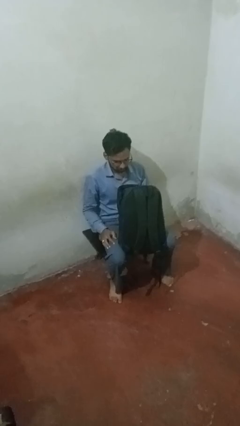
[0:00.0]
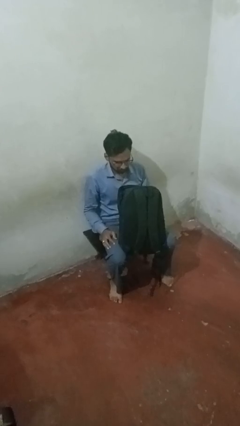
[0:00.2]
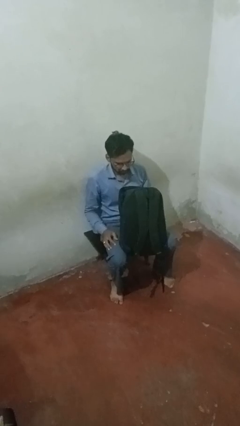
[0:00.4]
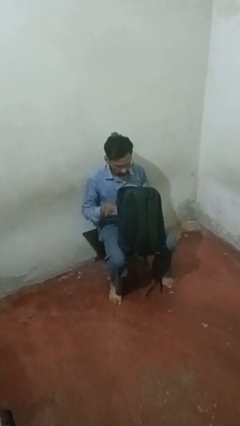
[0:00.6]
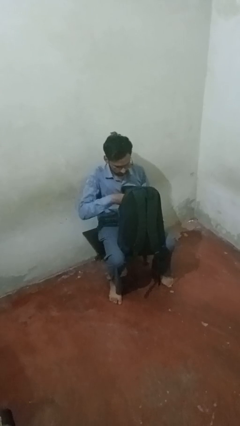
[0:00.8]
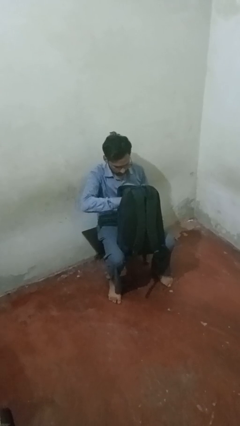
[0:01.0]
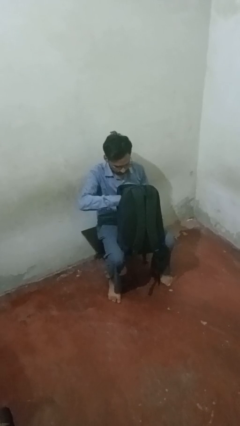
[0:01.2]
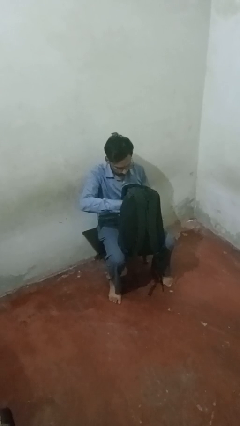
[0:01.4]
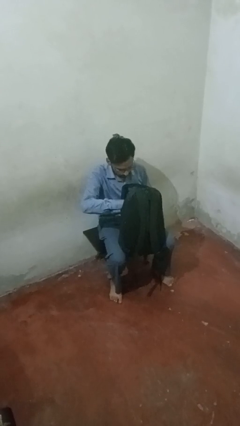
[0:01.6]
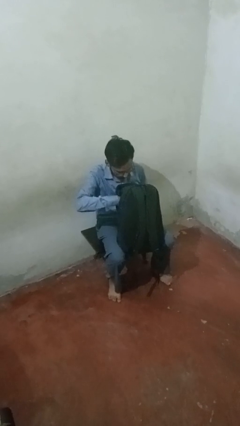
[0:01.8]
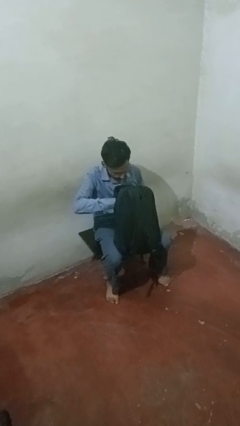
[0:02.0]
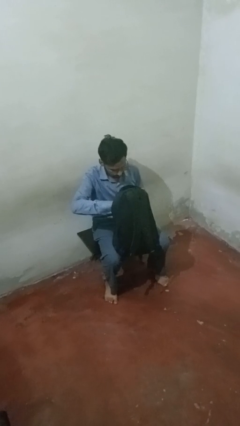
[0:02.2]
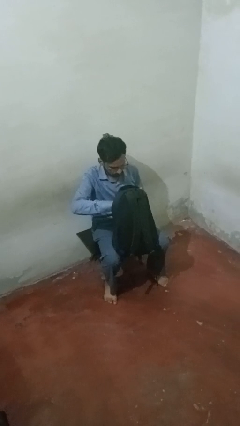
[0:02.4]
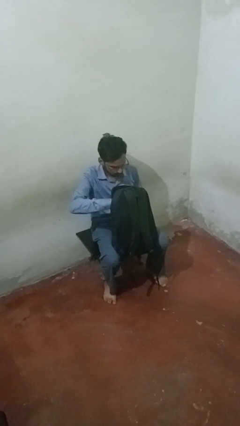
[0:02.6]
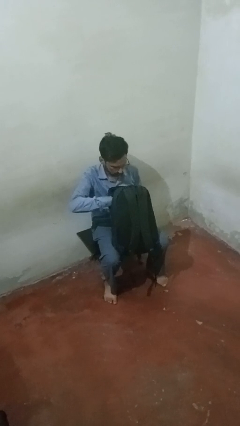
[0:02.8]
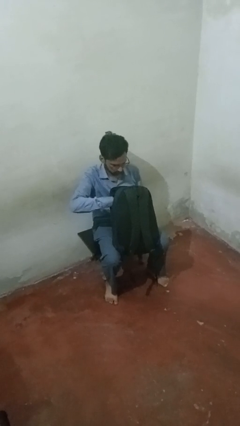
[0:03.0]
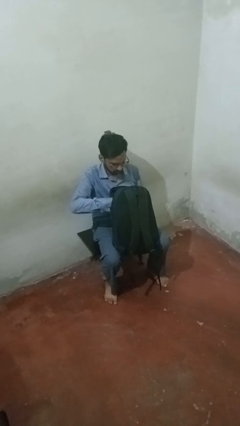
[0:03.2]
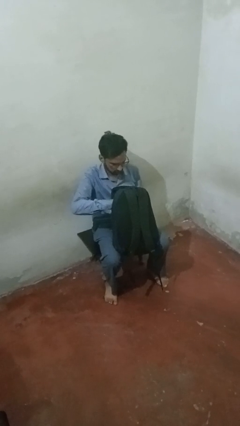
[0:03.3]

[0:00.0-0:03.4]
person searches in purse

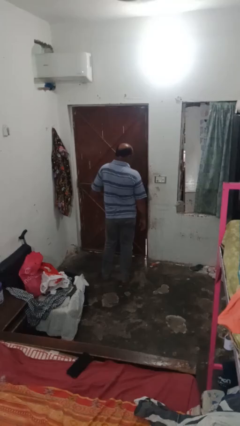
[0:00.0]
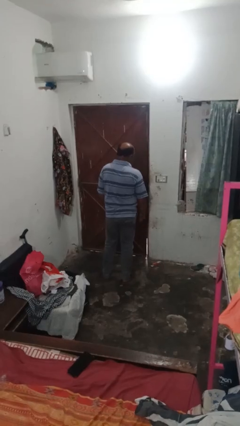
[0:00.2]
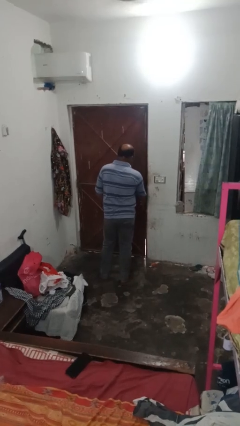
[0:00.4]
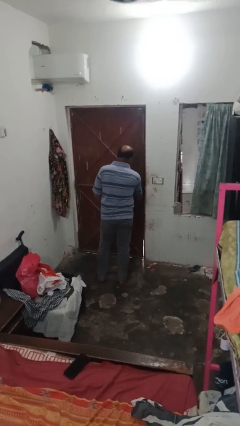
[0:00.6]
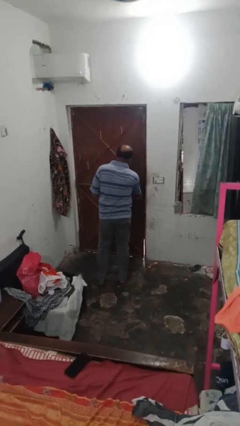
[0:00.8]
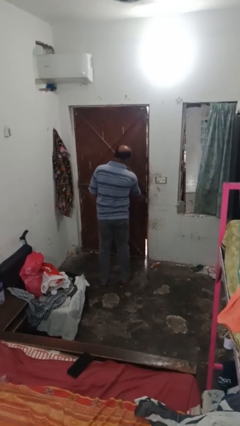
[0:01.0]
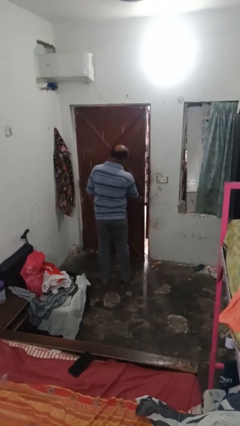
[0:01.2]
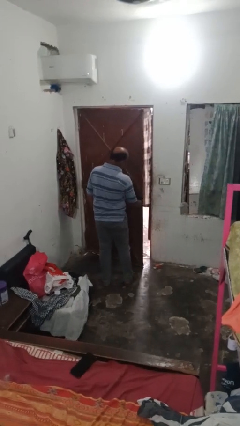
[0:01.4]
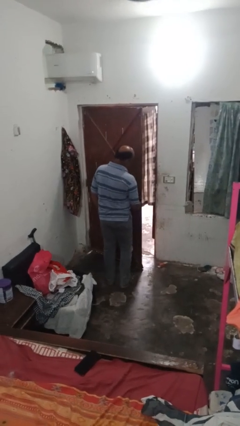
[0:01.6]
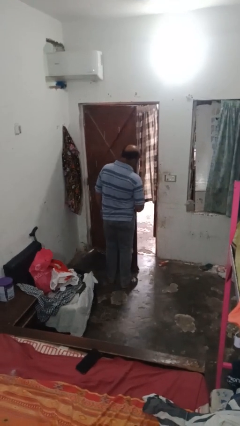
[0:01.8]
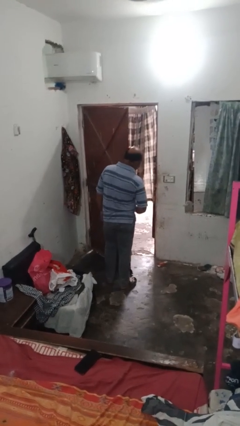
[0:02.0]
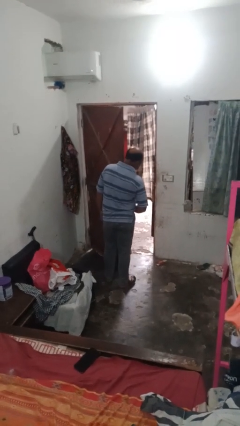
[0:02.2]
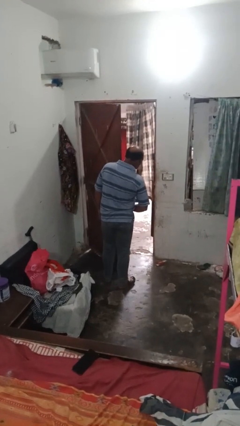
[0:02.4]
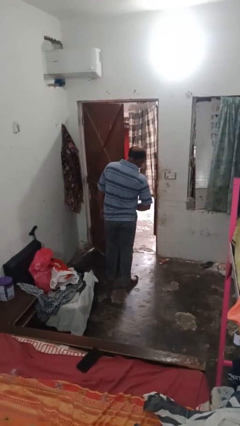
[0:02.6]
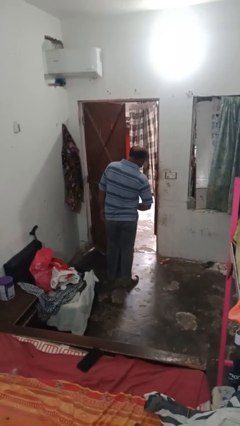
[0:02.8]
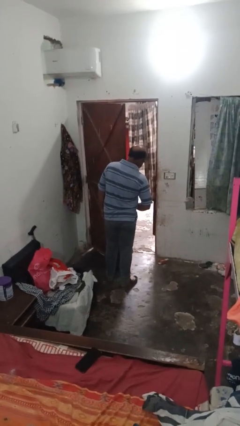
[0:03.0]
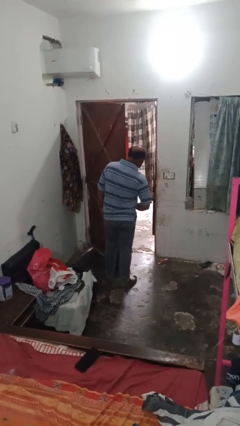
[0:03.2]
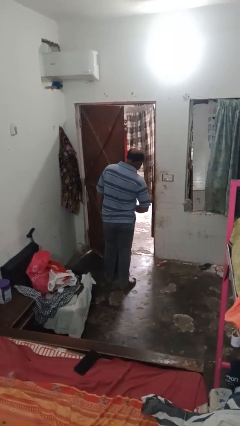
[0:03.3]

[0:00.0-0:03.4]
person opens closet door

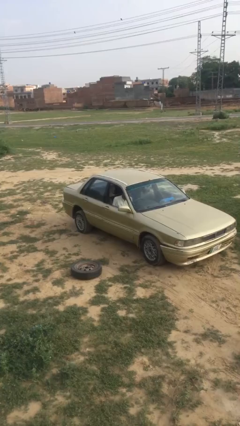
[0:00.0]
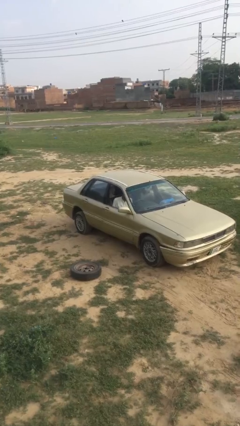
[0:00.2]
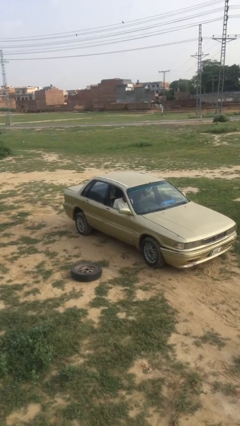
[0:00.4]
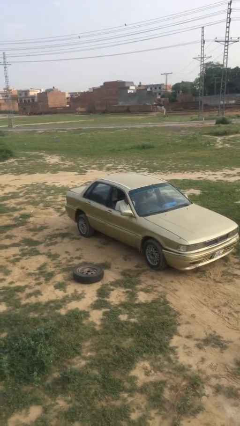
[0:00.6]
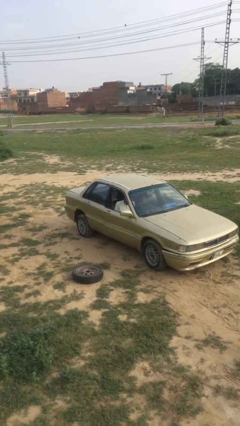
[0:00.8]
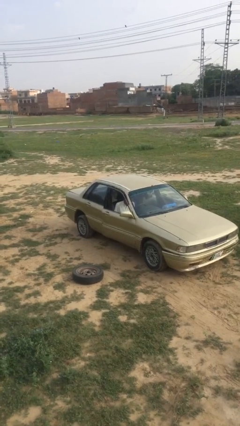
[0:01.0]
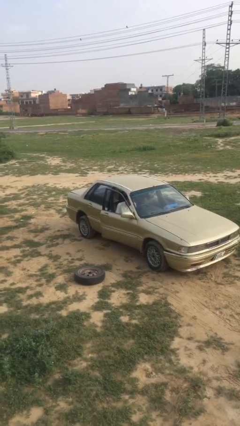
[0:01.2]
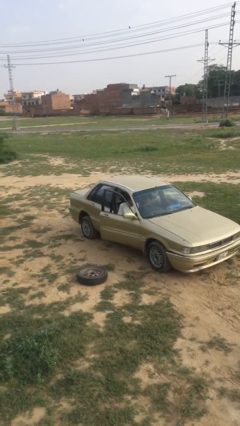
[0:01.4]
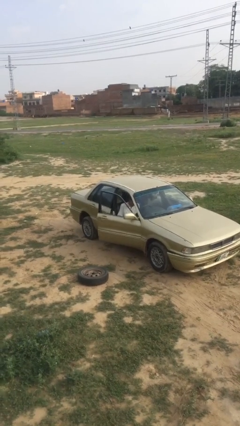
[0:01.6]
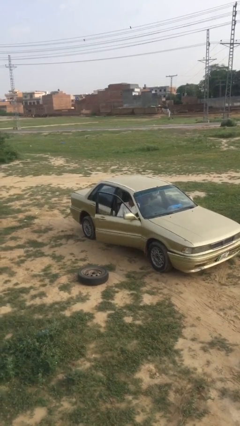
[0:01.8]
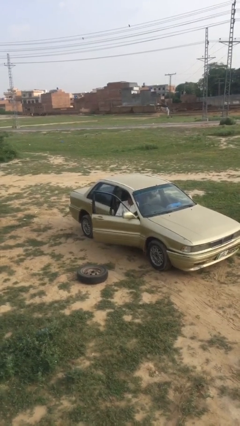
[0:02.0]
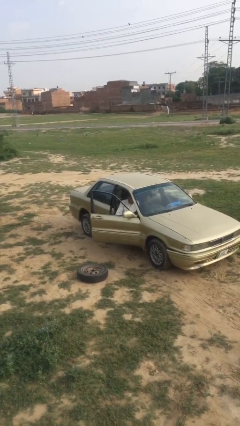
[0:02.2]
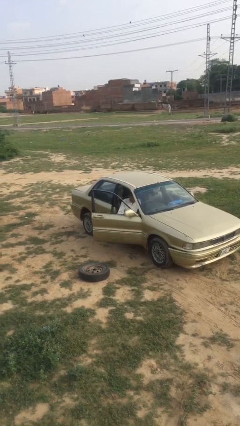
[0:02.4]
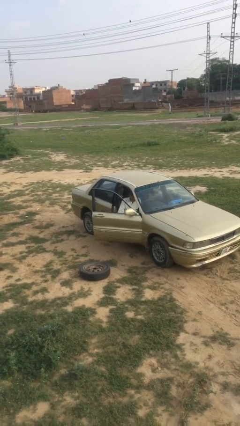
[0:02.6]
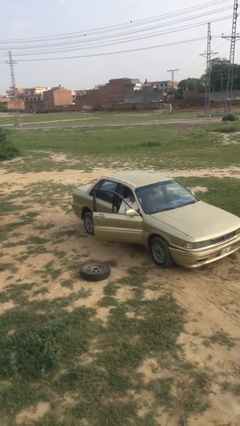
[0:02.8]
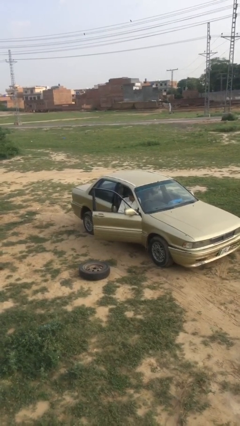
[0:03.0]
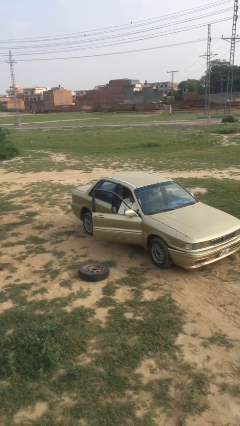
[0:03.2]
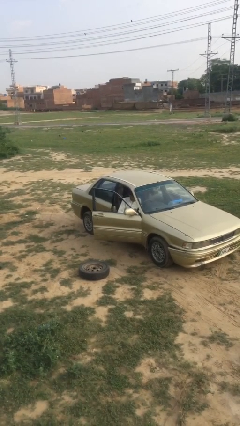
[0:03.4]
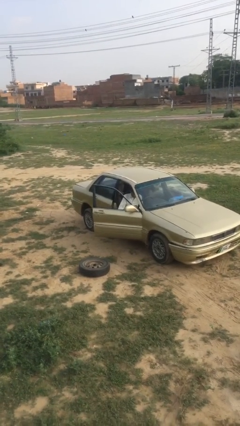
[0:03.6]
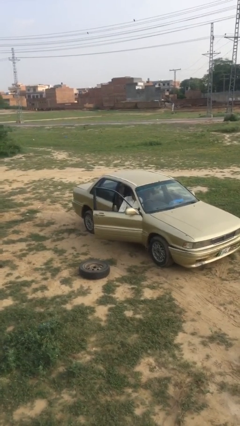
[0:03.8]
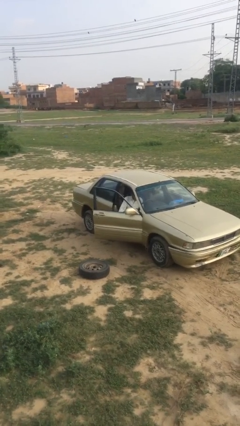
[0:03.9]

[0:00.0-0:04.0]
person opens car door

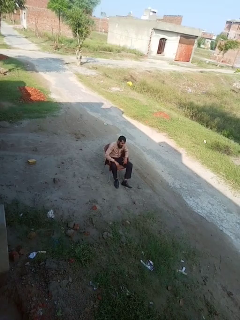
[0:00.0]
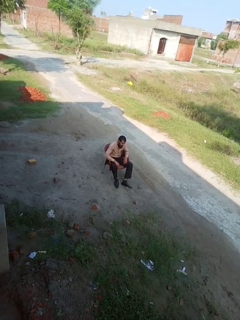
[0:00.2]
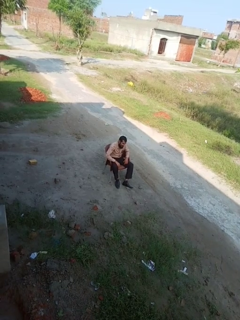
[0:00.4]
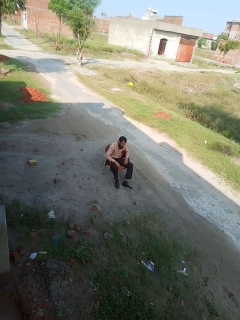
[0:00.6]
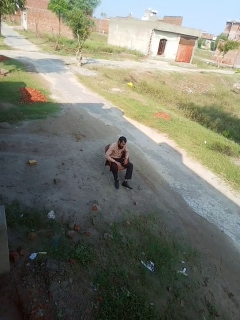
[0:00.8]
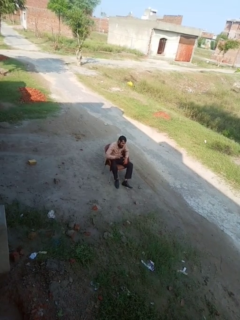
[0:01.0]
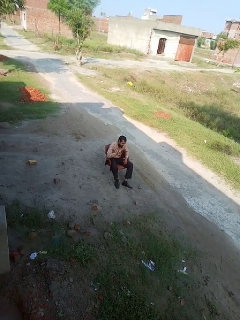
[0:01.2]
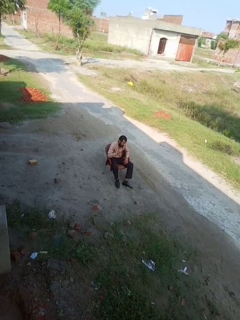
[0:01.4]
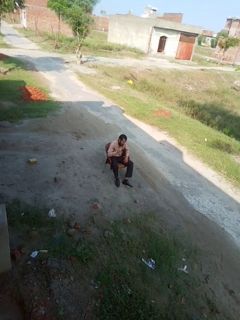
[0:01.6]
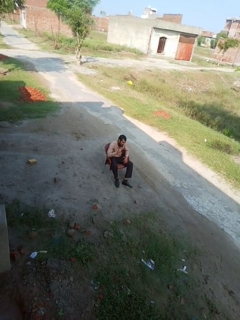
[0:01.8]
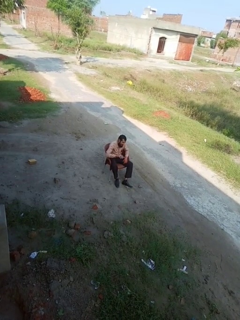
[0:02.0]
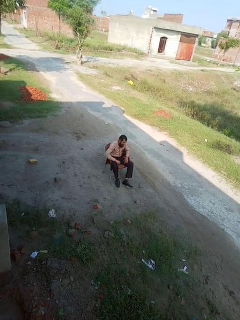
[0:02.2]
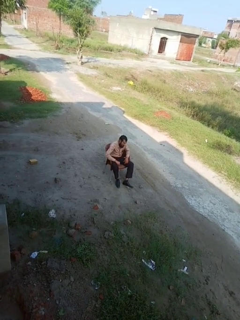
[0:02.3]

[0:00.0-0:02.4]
person gestures number four

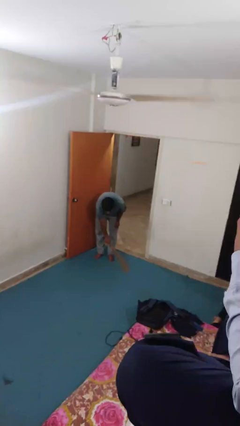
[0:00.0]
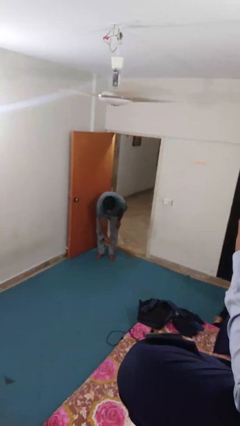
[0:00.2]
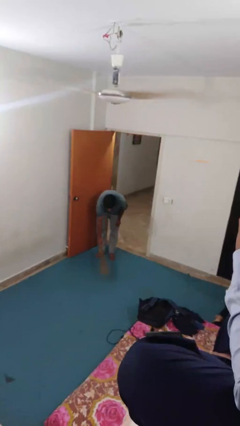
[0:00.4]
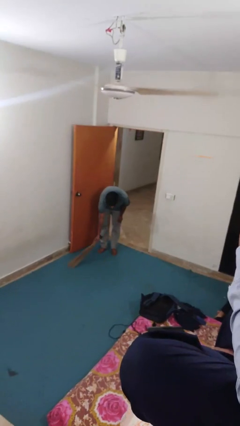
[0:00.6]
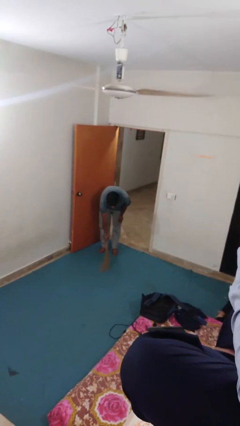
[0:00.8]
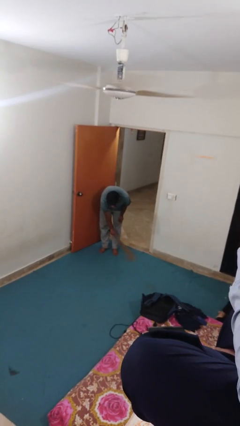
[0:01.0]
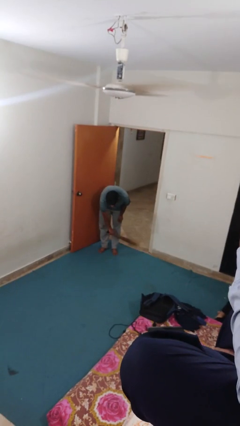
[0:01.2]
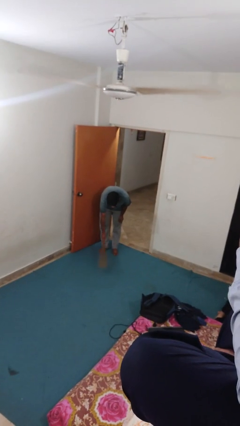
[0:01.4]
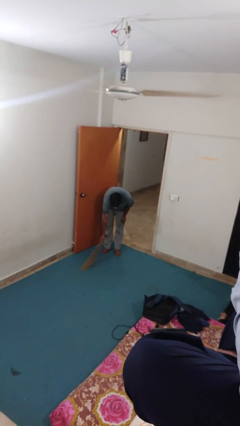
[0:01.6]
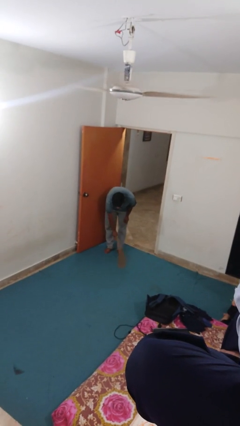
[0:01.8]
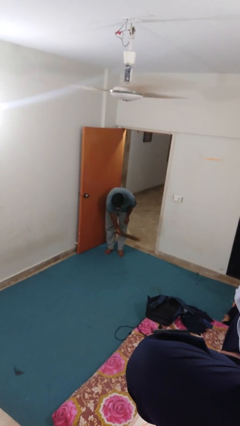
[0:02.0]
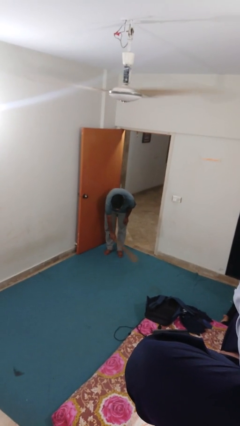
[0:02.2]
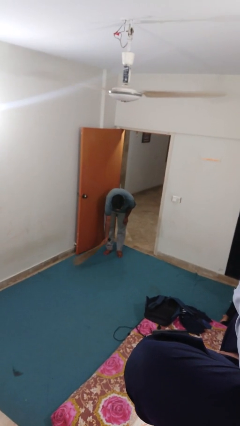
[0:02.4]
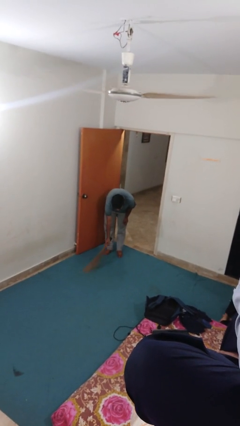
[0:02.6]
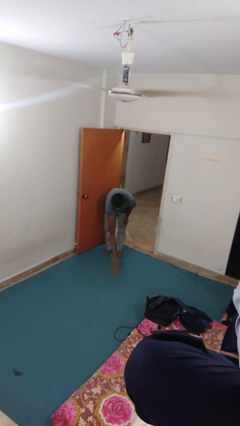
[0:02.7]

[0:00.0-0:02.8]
person sweeps floor

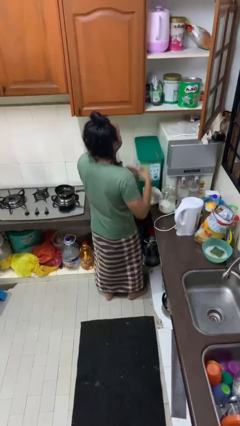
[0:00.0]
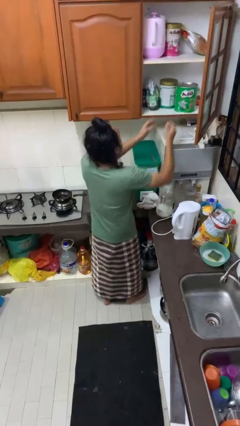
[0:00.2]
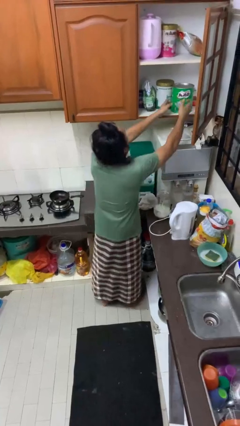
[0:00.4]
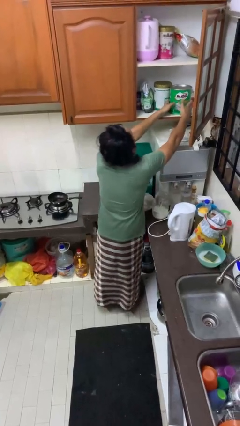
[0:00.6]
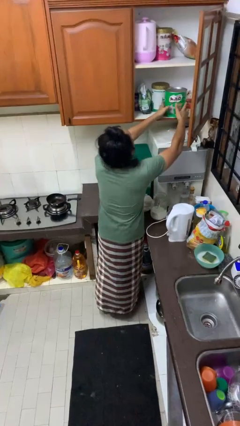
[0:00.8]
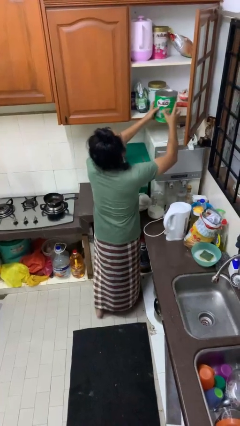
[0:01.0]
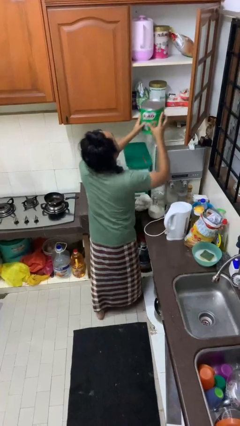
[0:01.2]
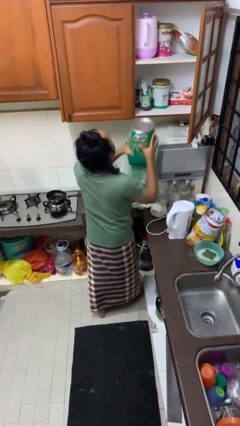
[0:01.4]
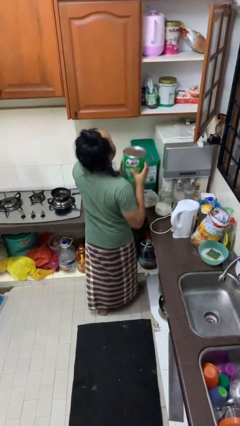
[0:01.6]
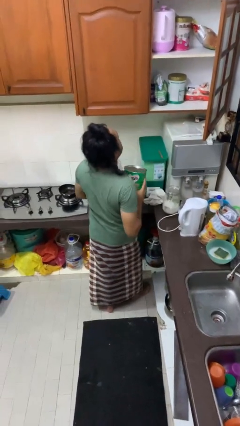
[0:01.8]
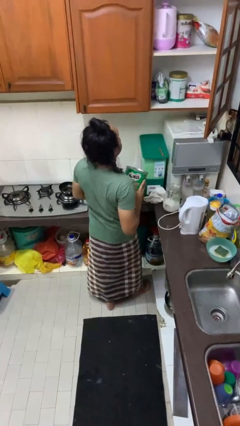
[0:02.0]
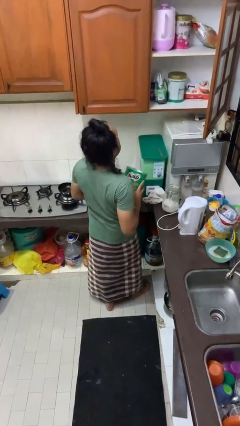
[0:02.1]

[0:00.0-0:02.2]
person takes object from cabinet
